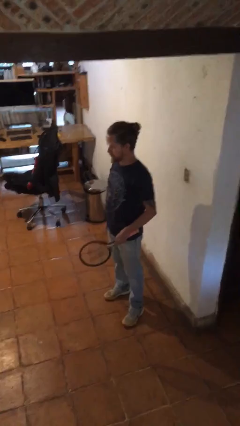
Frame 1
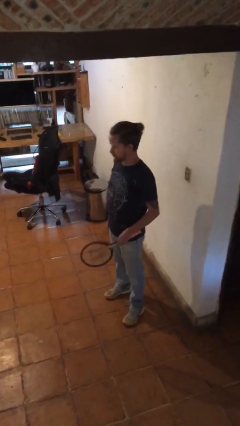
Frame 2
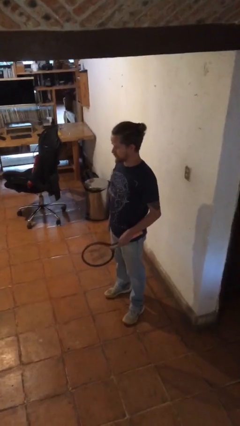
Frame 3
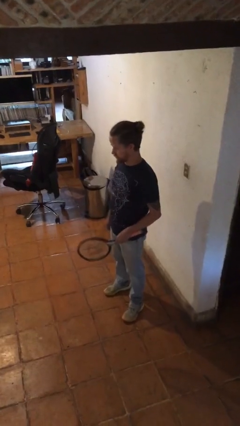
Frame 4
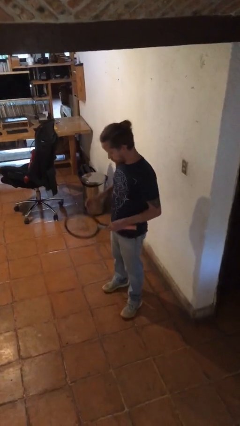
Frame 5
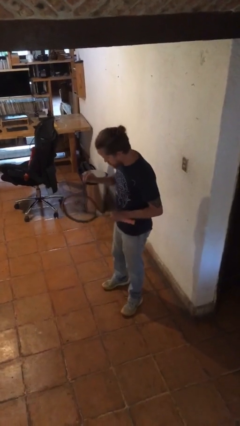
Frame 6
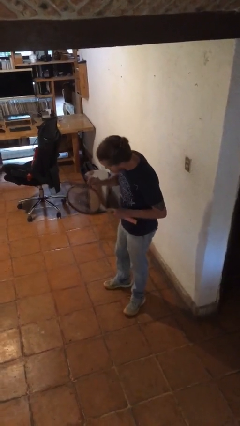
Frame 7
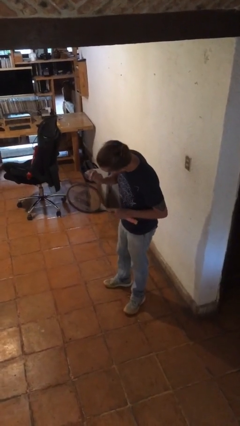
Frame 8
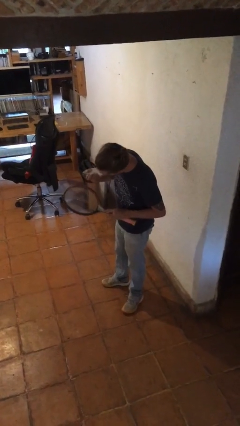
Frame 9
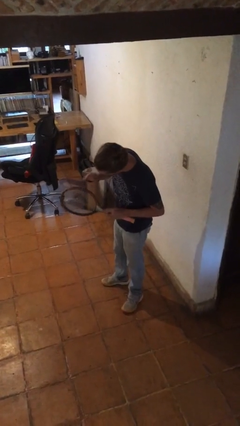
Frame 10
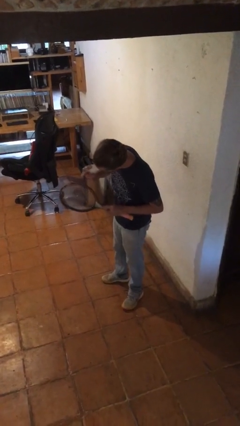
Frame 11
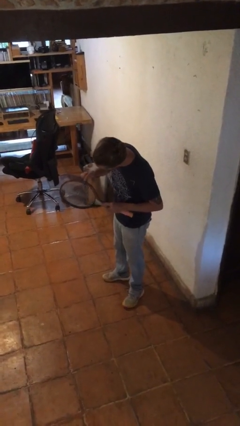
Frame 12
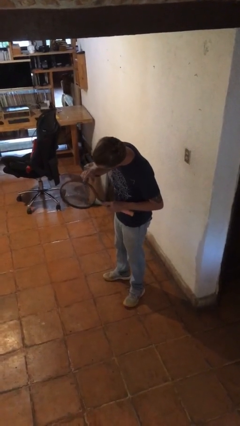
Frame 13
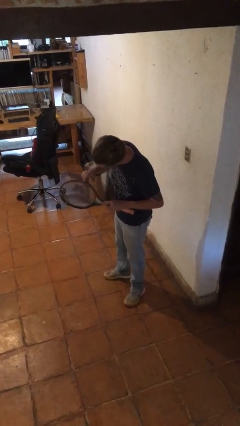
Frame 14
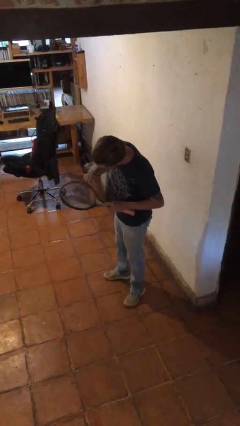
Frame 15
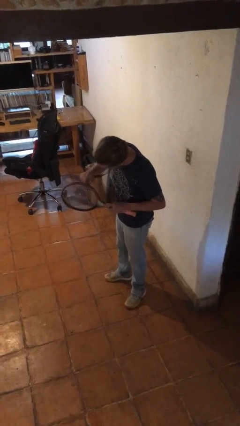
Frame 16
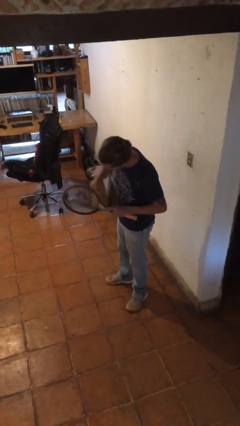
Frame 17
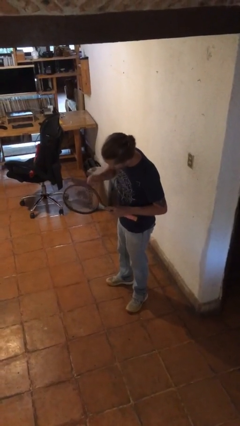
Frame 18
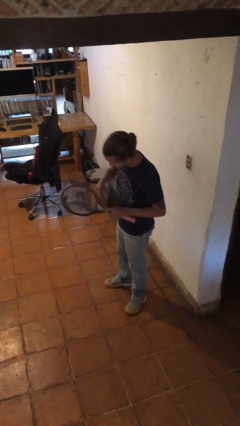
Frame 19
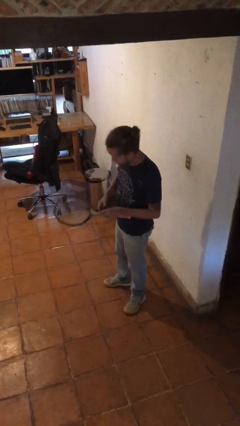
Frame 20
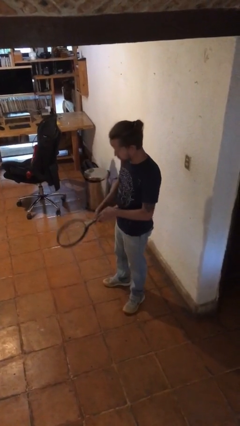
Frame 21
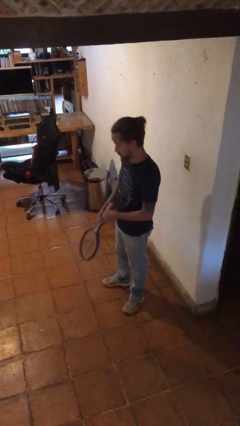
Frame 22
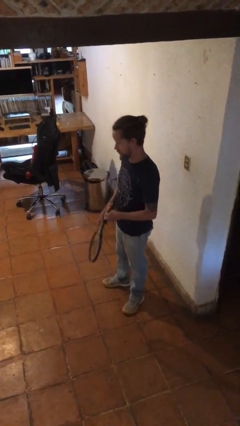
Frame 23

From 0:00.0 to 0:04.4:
person taps object with finger

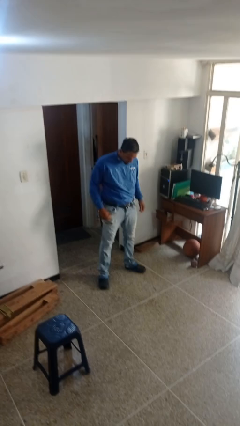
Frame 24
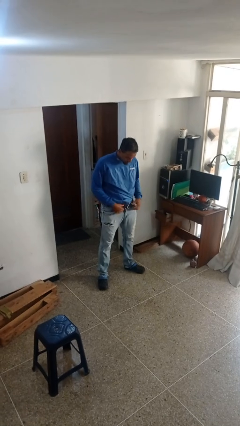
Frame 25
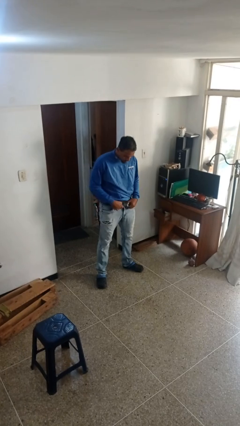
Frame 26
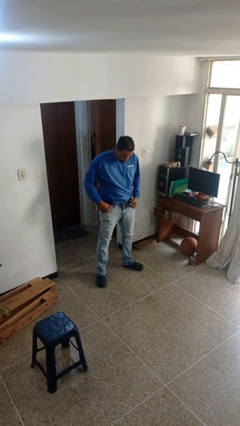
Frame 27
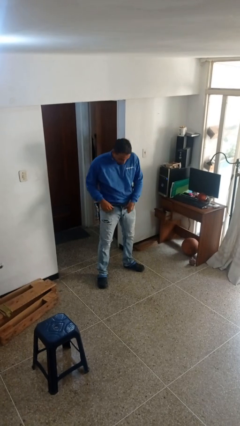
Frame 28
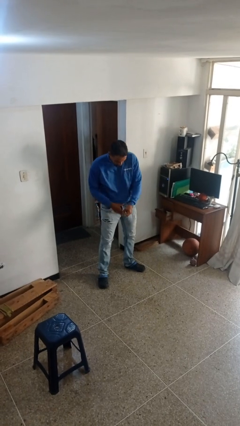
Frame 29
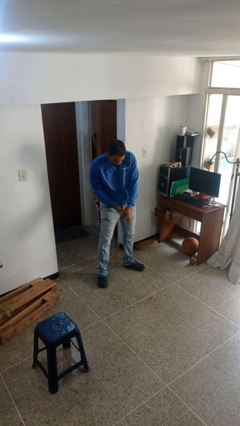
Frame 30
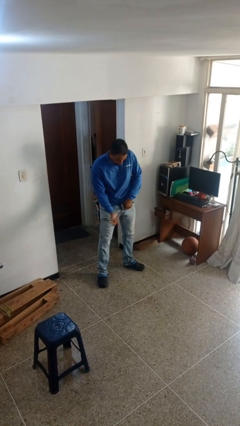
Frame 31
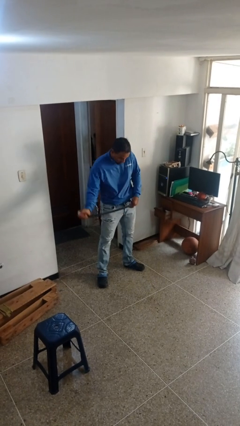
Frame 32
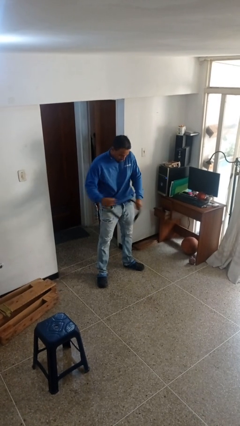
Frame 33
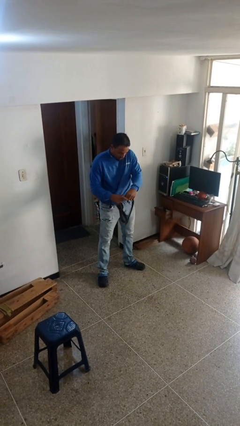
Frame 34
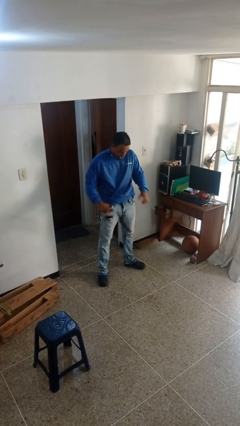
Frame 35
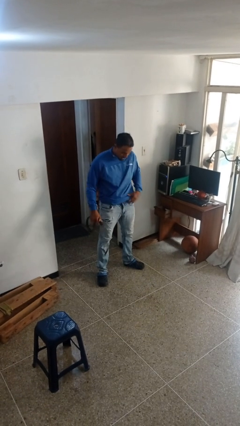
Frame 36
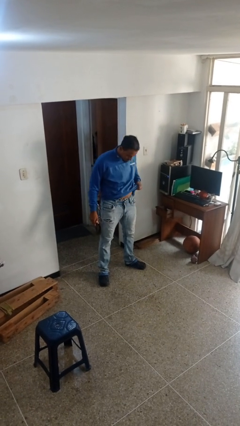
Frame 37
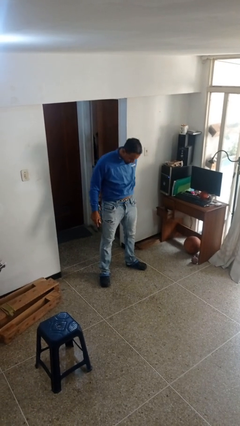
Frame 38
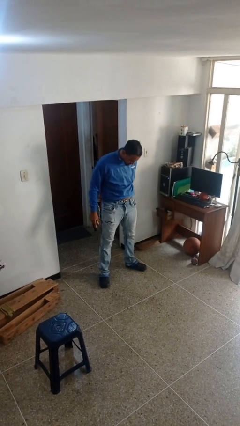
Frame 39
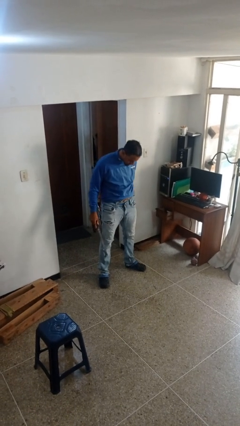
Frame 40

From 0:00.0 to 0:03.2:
person takes off belt

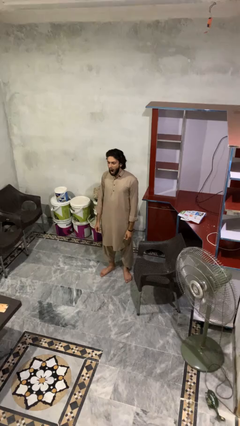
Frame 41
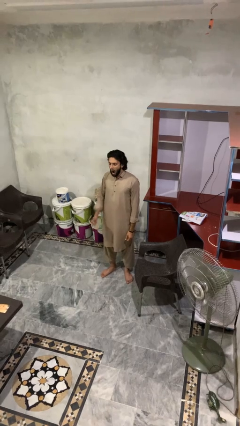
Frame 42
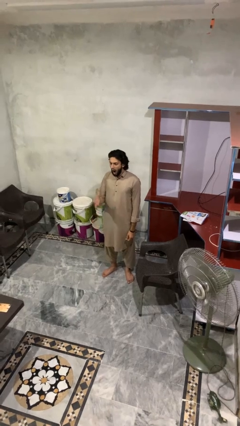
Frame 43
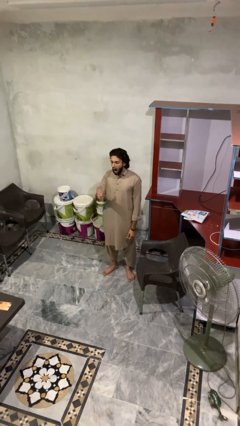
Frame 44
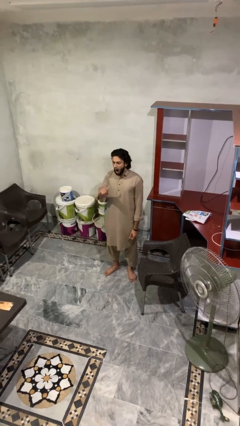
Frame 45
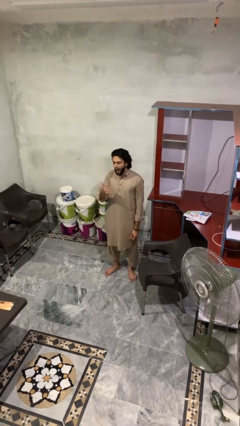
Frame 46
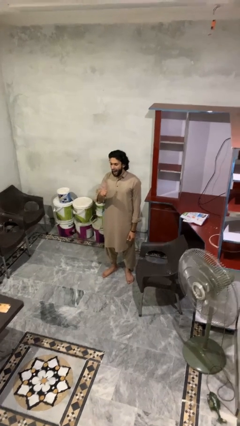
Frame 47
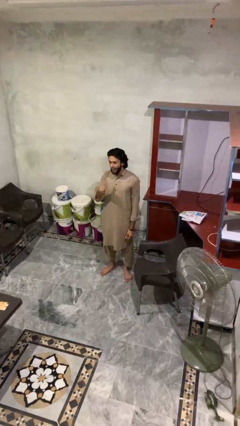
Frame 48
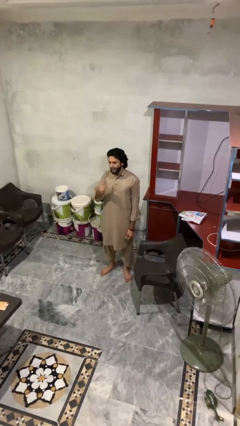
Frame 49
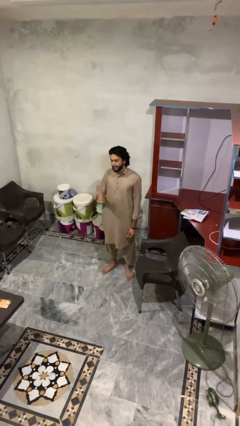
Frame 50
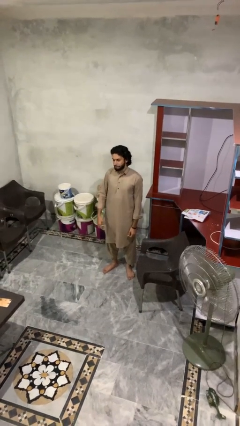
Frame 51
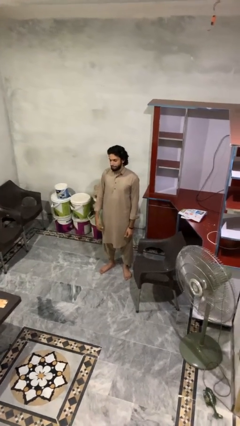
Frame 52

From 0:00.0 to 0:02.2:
person gestures hang loose

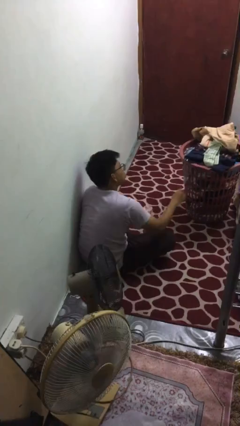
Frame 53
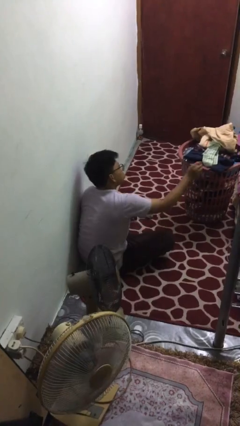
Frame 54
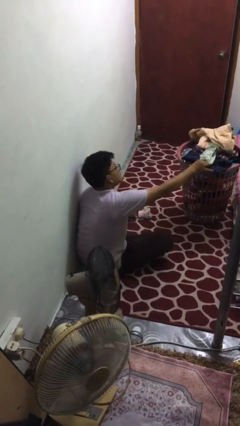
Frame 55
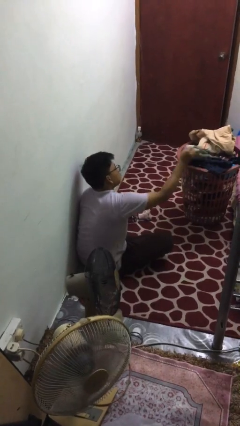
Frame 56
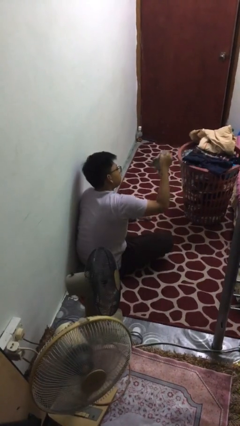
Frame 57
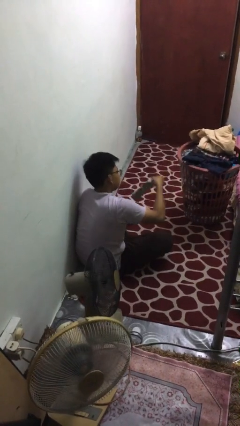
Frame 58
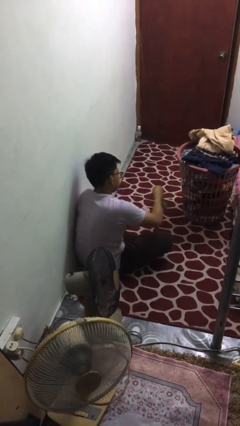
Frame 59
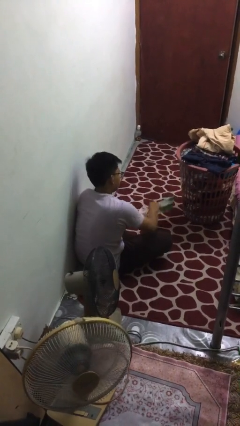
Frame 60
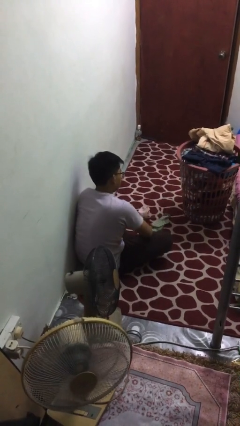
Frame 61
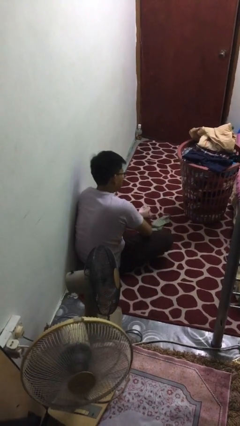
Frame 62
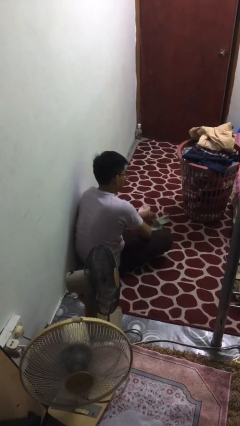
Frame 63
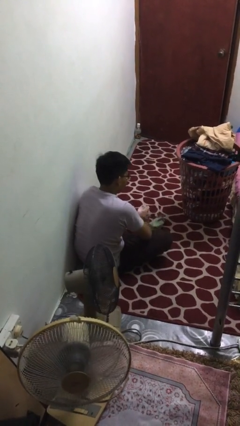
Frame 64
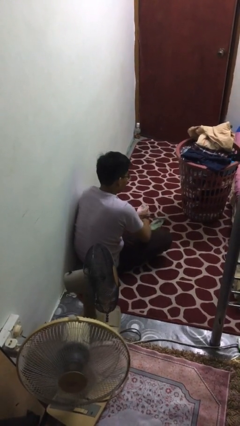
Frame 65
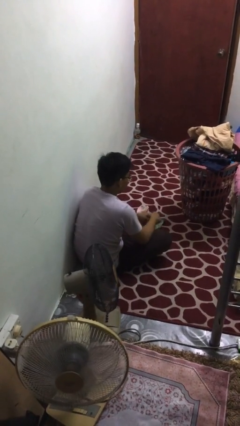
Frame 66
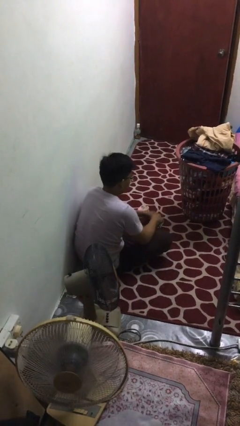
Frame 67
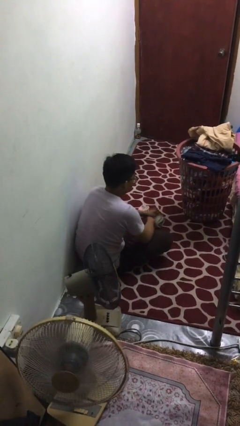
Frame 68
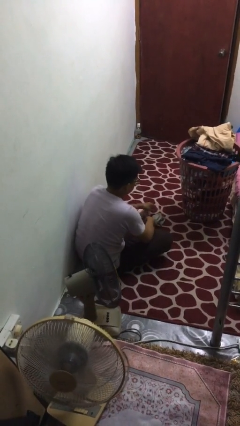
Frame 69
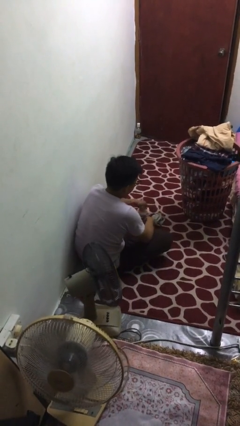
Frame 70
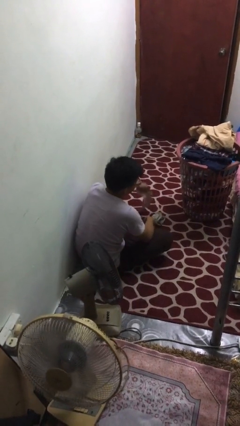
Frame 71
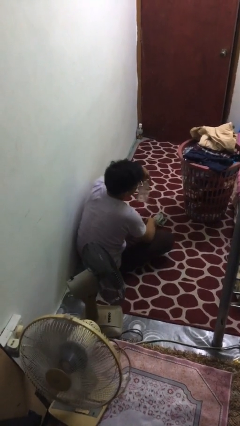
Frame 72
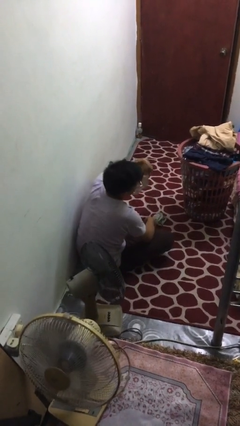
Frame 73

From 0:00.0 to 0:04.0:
person folds socks

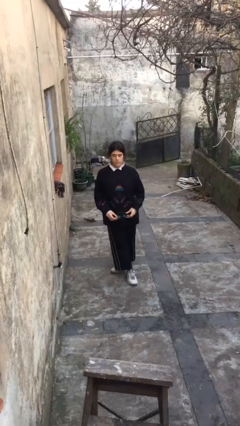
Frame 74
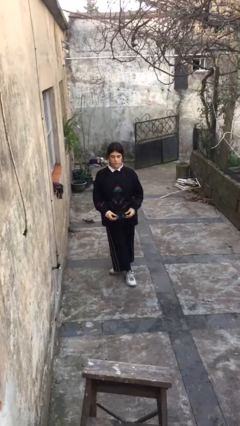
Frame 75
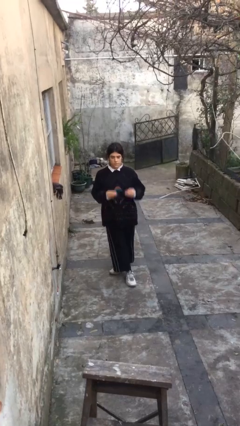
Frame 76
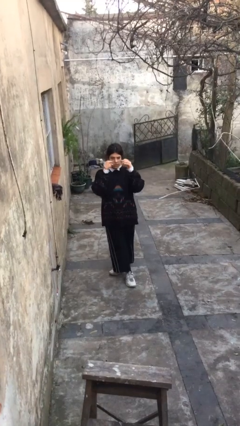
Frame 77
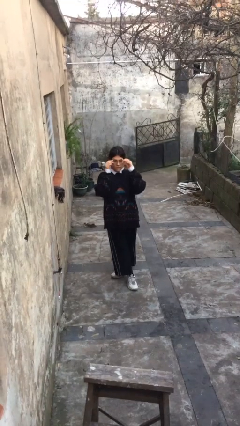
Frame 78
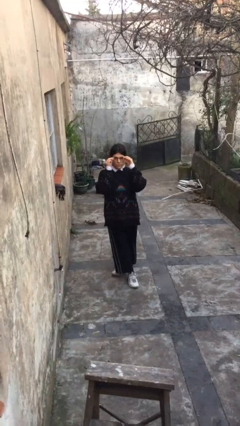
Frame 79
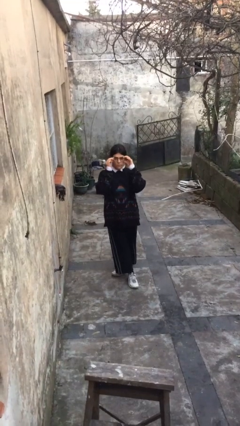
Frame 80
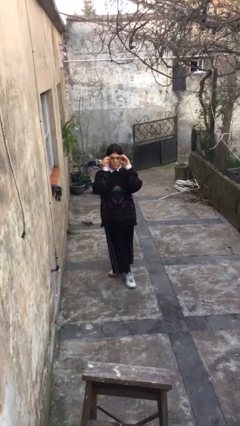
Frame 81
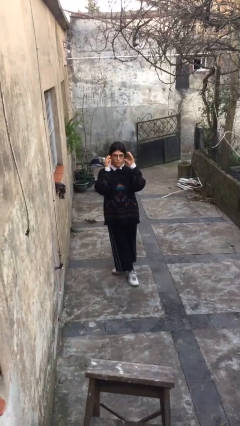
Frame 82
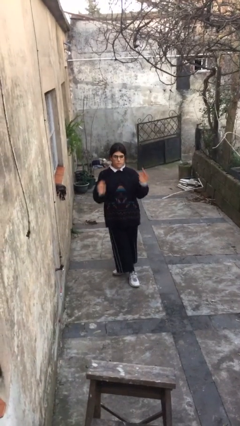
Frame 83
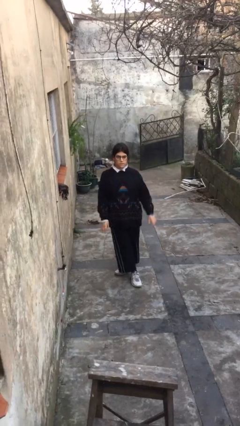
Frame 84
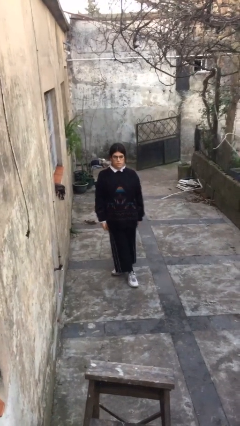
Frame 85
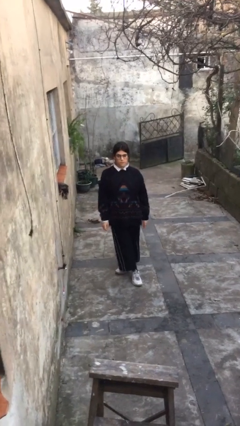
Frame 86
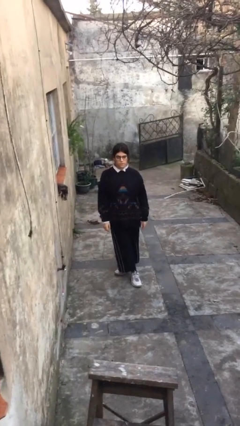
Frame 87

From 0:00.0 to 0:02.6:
person puts on glasses

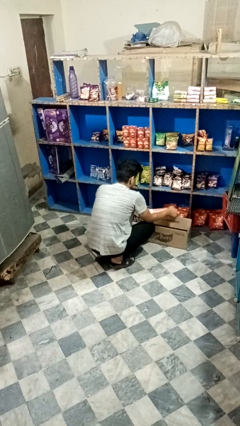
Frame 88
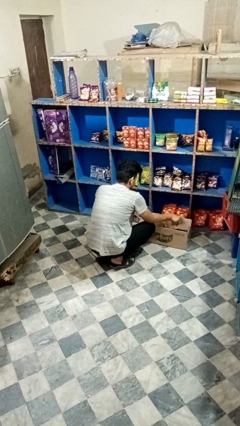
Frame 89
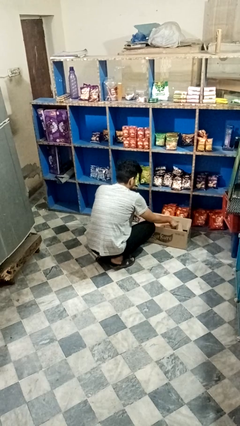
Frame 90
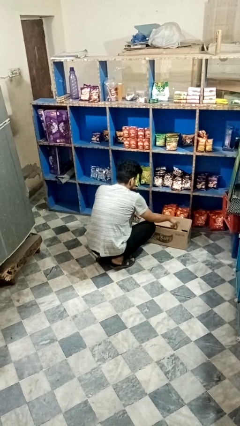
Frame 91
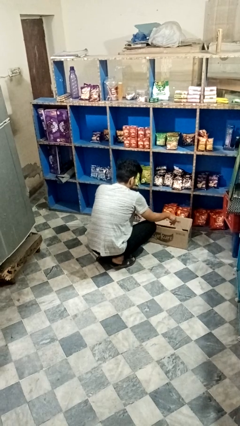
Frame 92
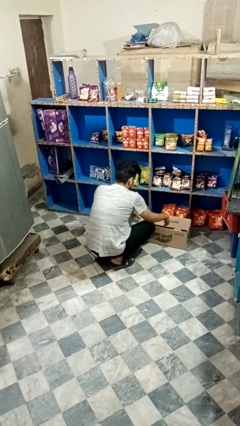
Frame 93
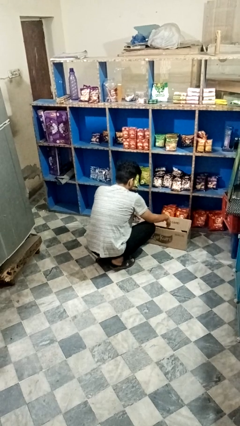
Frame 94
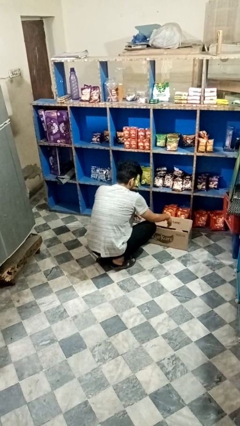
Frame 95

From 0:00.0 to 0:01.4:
person puts object into box
